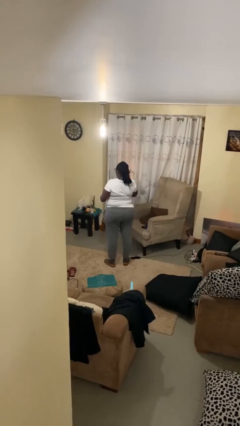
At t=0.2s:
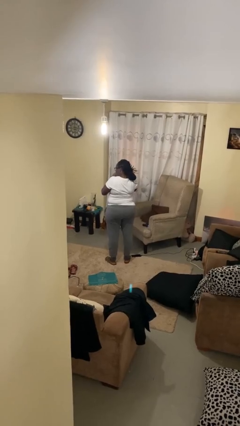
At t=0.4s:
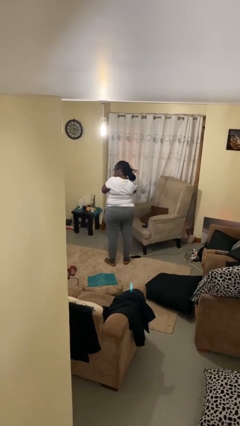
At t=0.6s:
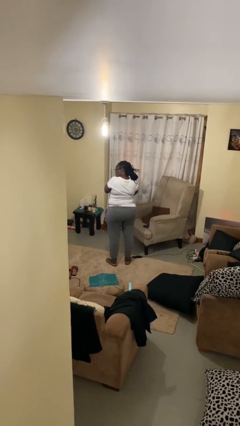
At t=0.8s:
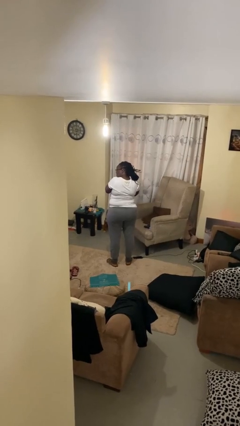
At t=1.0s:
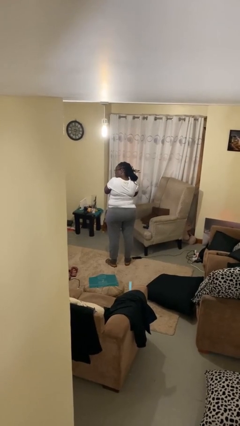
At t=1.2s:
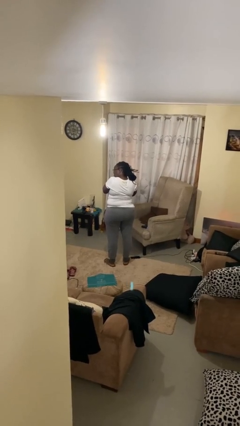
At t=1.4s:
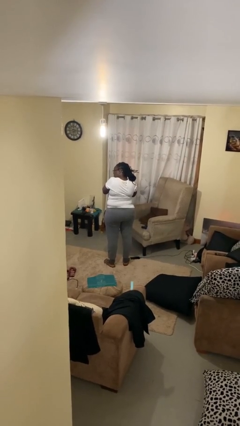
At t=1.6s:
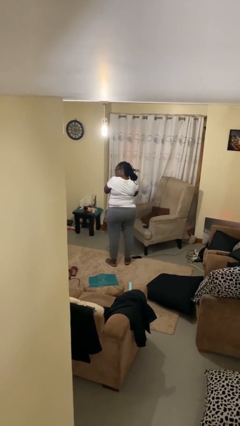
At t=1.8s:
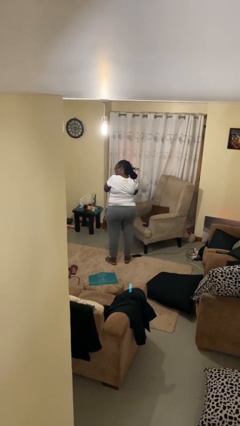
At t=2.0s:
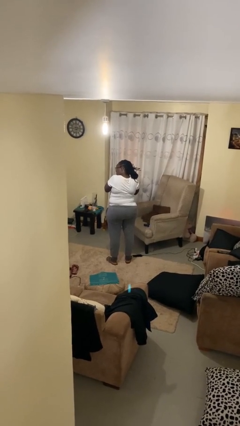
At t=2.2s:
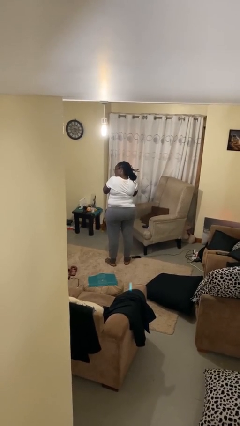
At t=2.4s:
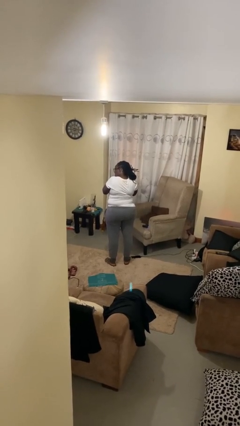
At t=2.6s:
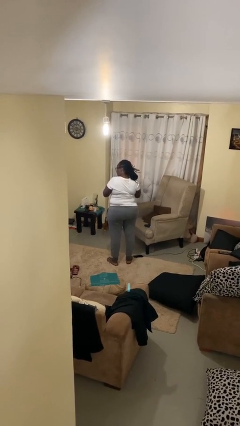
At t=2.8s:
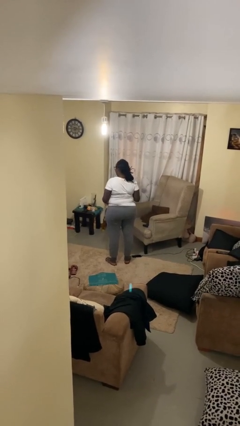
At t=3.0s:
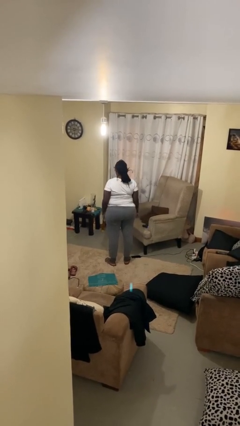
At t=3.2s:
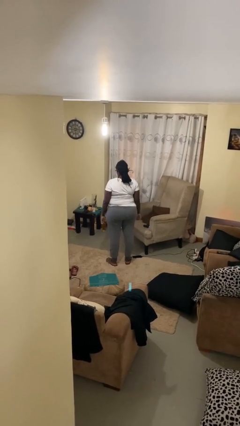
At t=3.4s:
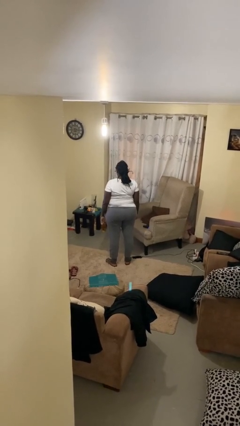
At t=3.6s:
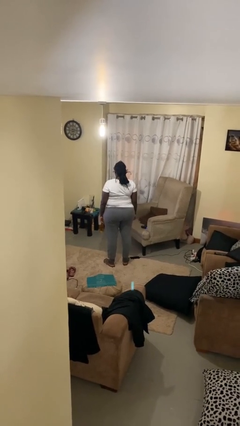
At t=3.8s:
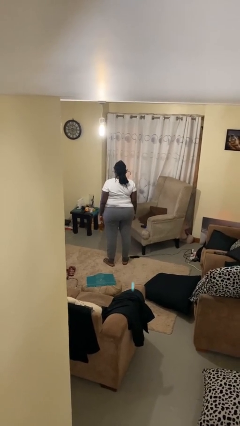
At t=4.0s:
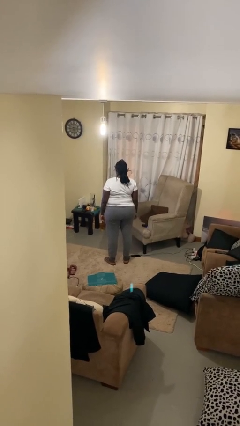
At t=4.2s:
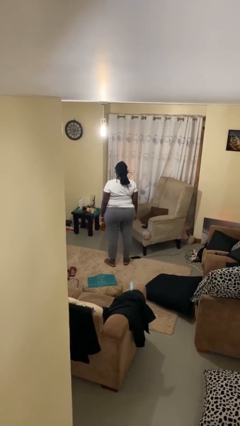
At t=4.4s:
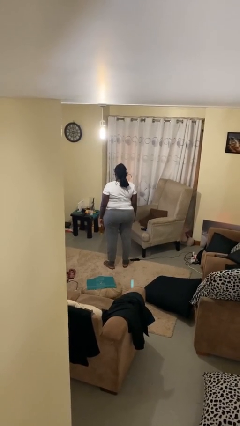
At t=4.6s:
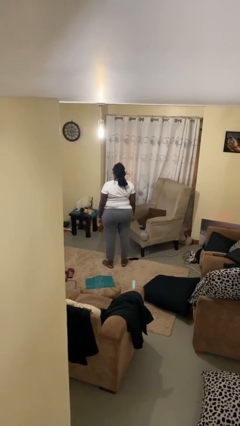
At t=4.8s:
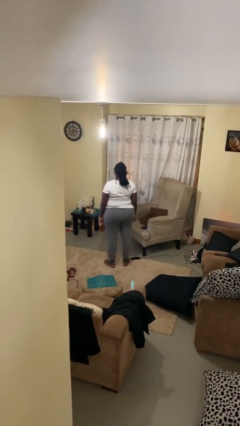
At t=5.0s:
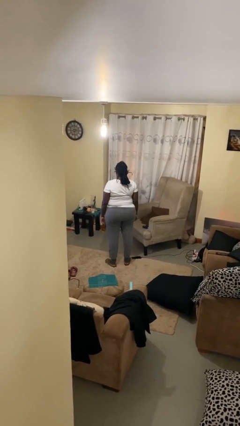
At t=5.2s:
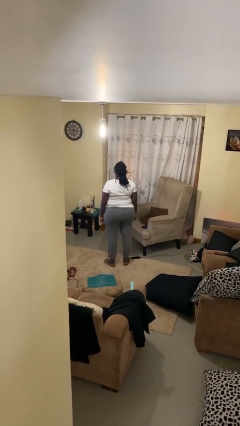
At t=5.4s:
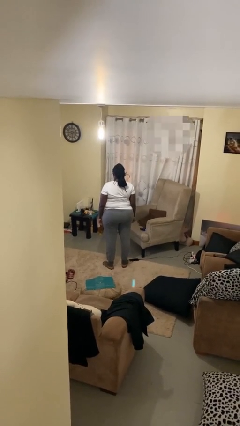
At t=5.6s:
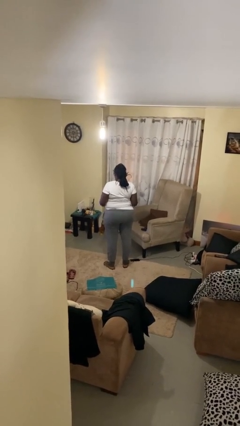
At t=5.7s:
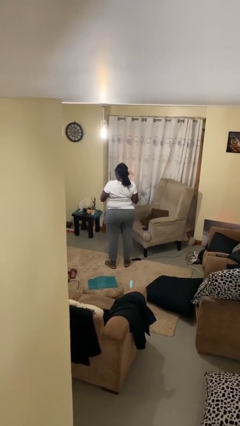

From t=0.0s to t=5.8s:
person puts on earrings

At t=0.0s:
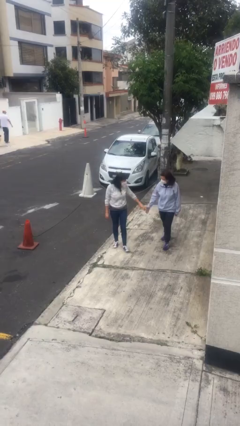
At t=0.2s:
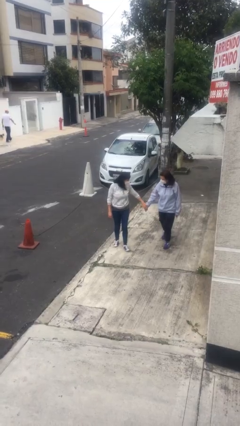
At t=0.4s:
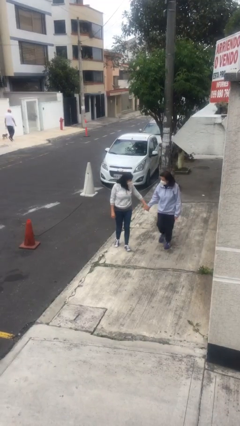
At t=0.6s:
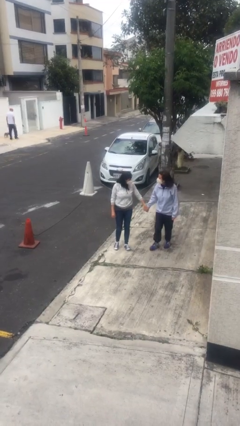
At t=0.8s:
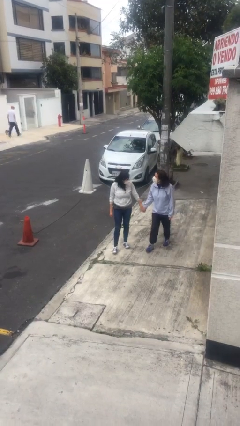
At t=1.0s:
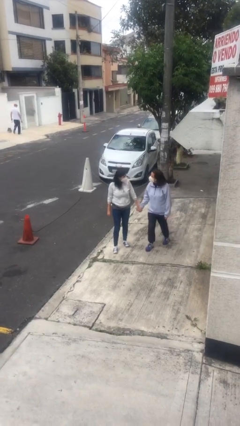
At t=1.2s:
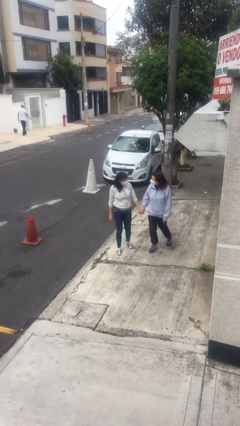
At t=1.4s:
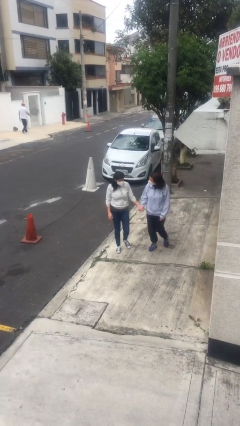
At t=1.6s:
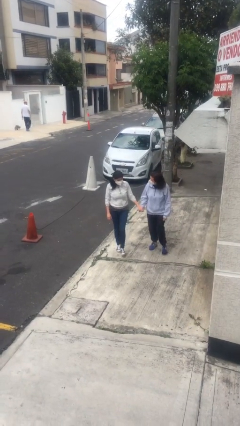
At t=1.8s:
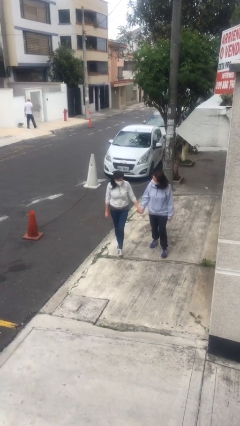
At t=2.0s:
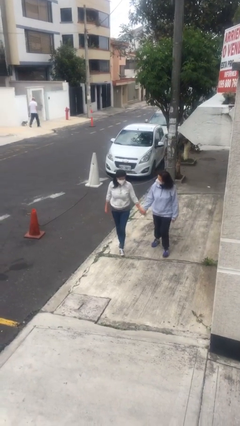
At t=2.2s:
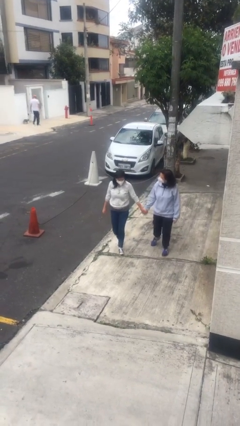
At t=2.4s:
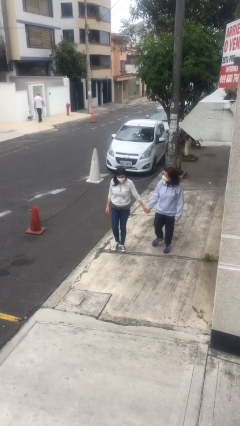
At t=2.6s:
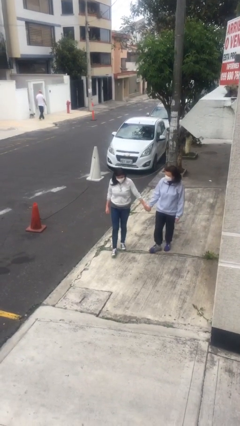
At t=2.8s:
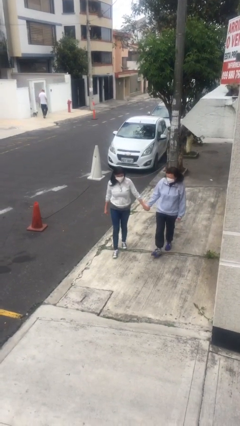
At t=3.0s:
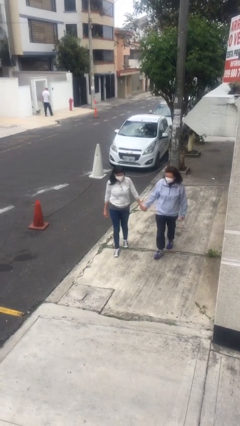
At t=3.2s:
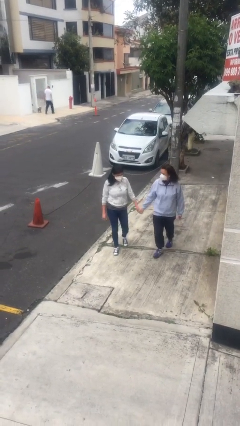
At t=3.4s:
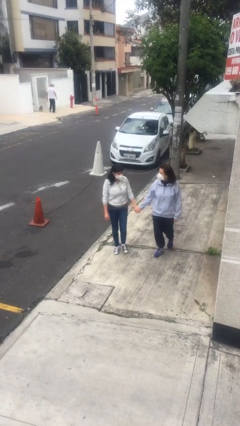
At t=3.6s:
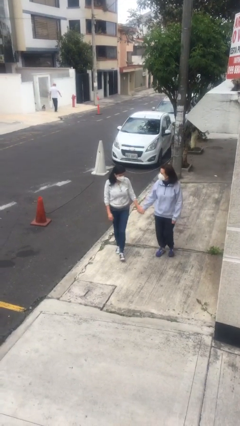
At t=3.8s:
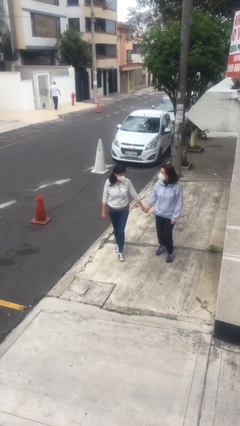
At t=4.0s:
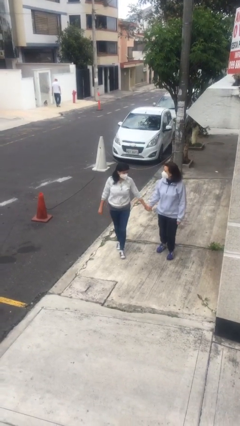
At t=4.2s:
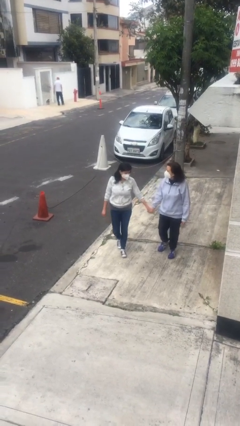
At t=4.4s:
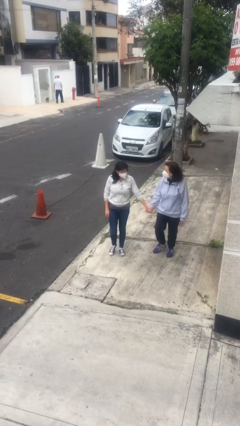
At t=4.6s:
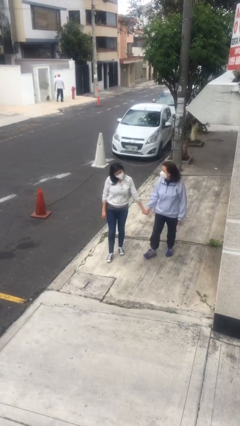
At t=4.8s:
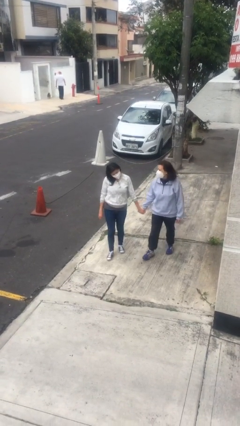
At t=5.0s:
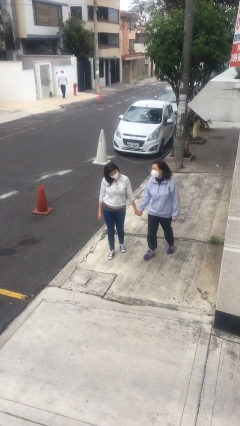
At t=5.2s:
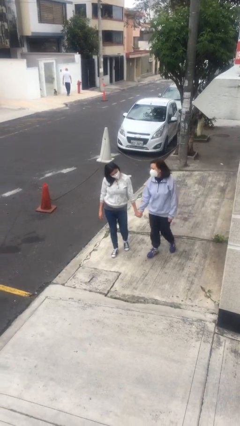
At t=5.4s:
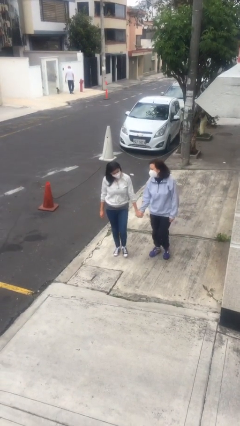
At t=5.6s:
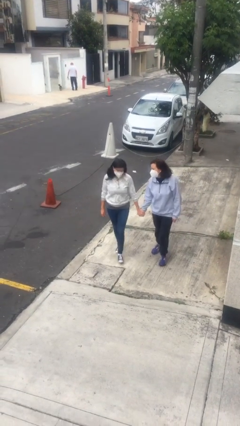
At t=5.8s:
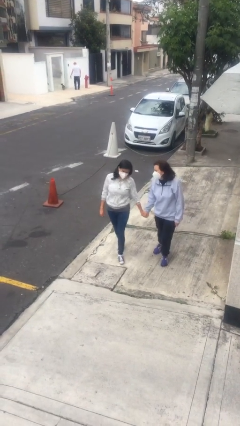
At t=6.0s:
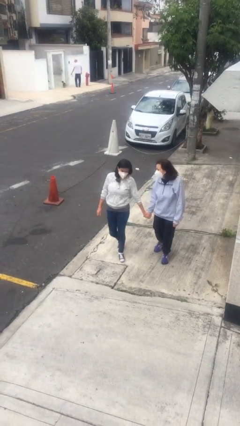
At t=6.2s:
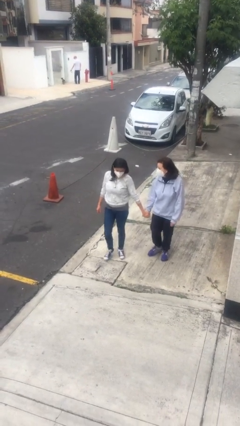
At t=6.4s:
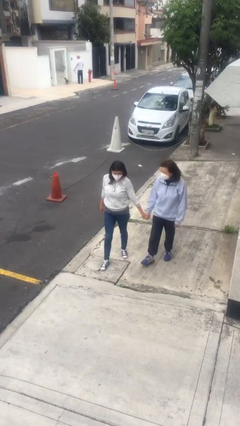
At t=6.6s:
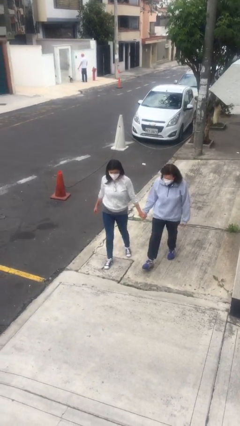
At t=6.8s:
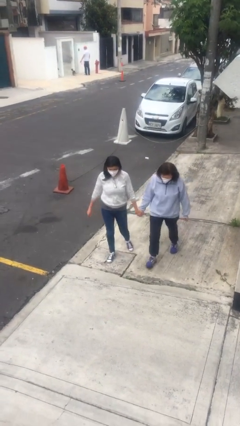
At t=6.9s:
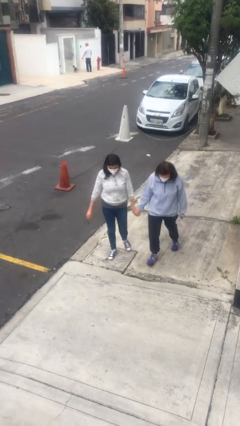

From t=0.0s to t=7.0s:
person holds hand

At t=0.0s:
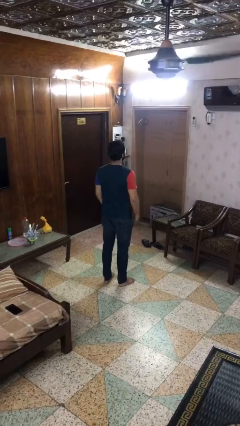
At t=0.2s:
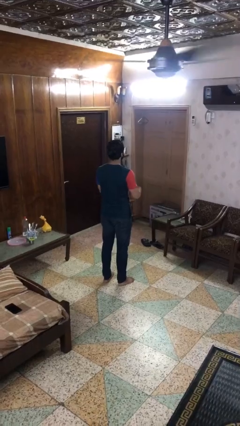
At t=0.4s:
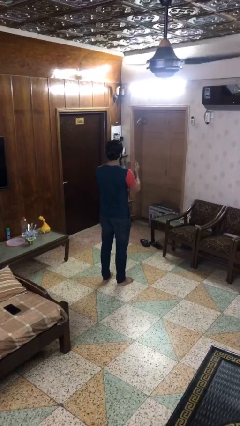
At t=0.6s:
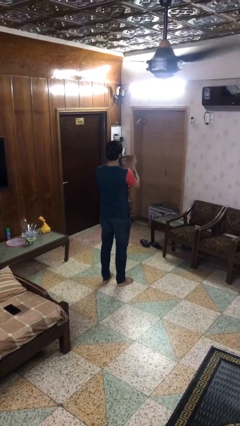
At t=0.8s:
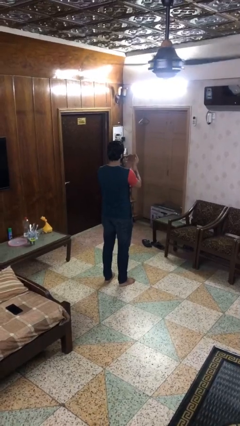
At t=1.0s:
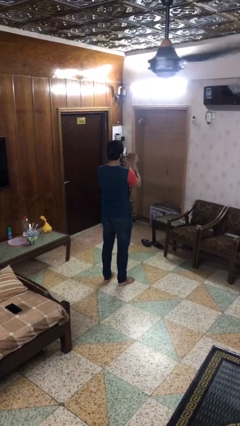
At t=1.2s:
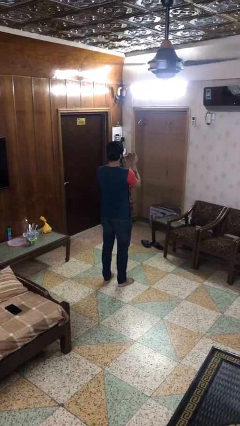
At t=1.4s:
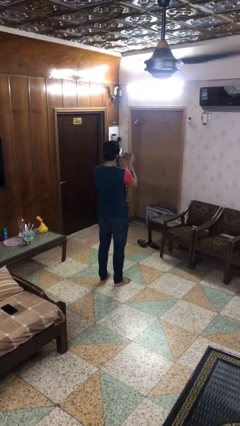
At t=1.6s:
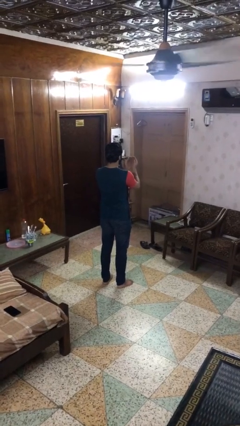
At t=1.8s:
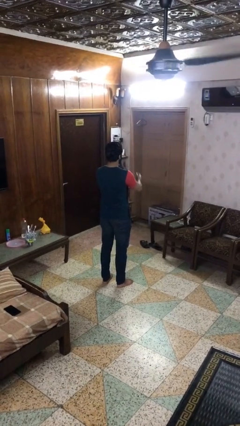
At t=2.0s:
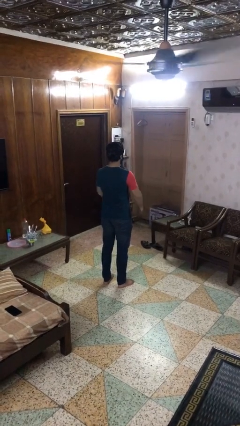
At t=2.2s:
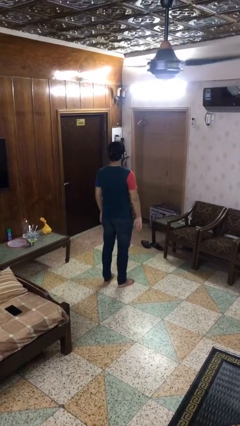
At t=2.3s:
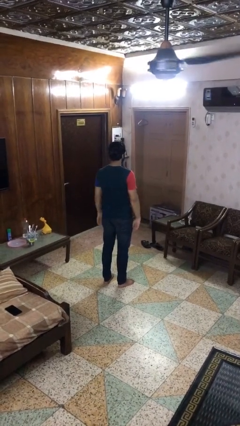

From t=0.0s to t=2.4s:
person prays

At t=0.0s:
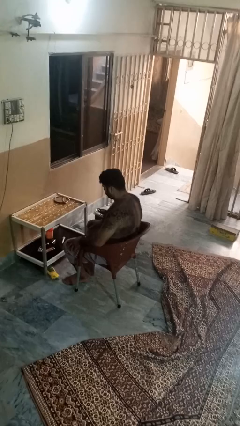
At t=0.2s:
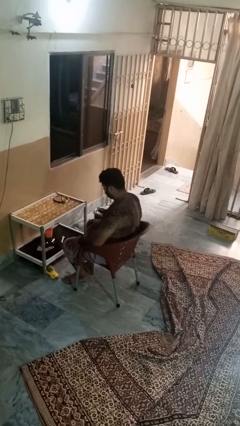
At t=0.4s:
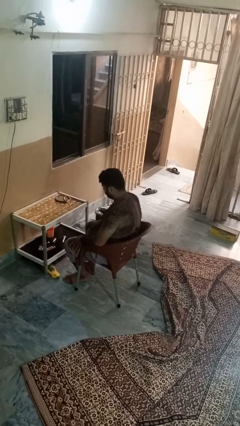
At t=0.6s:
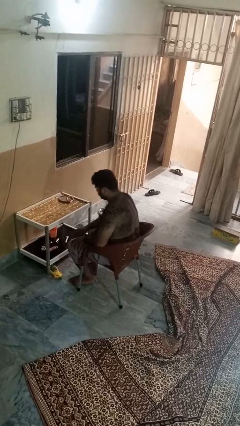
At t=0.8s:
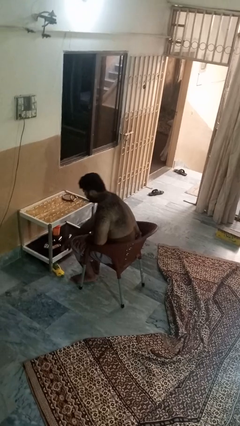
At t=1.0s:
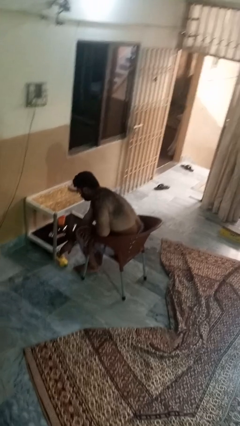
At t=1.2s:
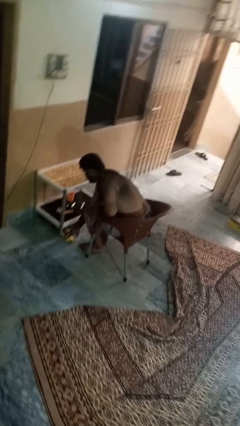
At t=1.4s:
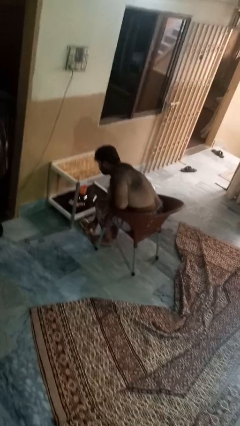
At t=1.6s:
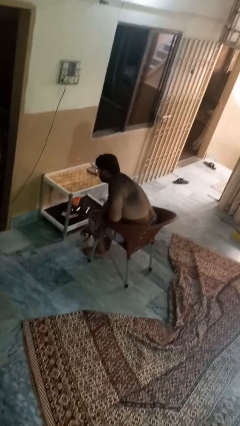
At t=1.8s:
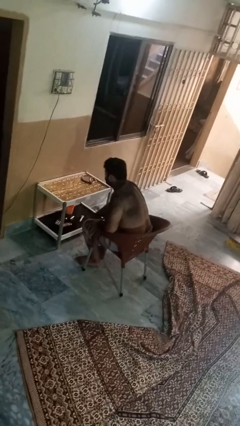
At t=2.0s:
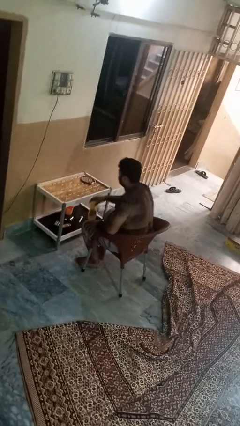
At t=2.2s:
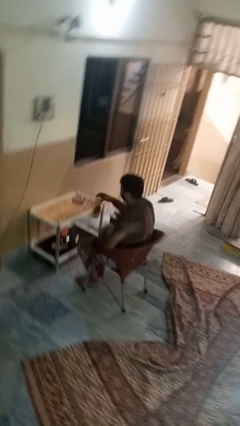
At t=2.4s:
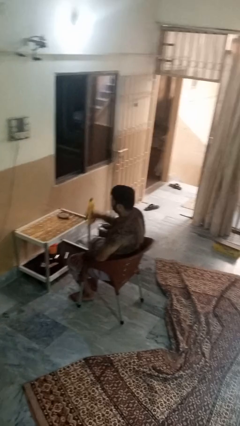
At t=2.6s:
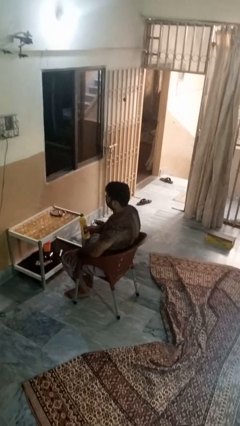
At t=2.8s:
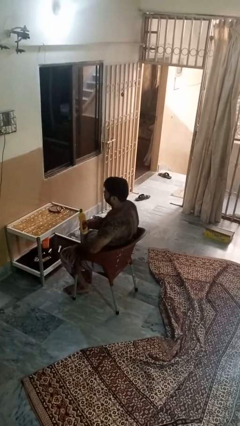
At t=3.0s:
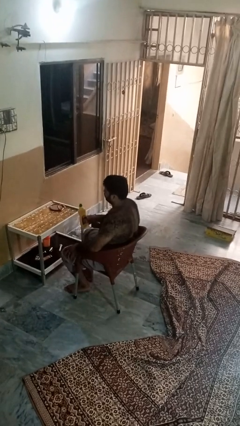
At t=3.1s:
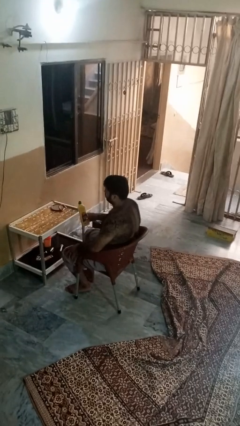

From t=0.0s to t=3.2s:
person picks up object from floor
